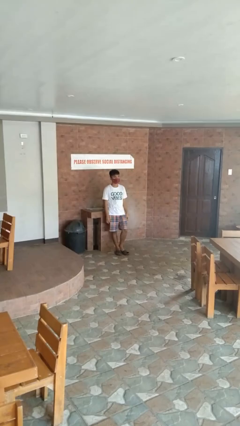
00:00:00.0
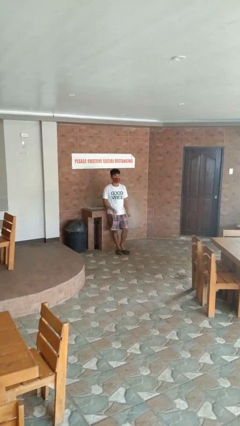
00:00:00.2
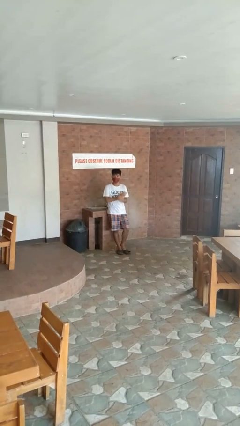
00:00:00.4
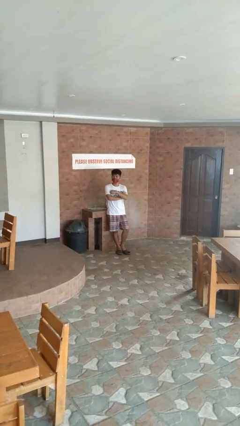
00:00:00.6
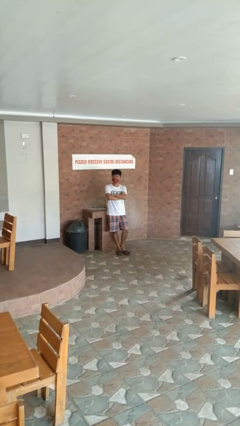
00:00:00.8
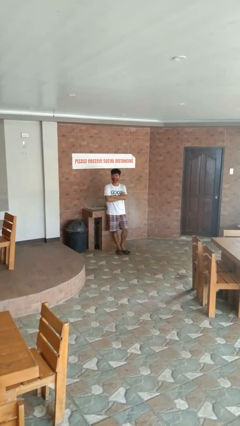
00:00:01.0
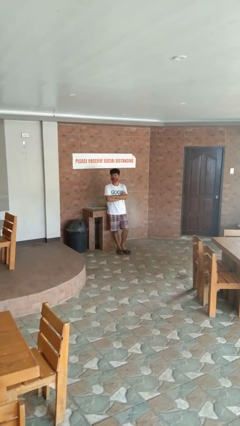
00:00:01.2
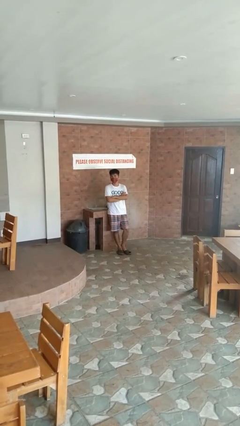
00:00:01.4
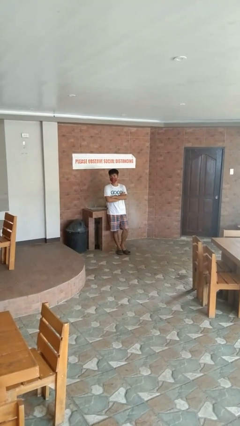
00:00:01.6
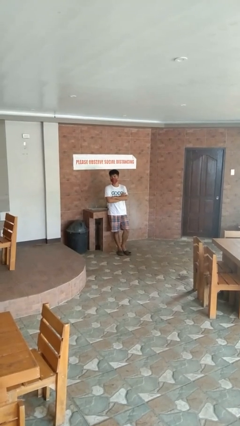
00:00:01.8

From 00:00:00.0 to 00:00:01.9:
person crosses arms

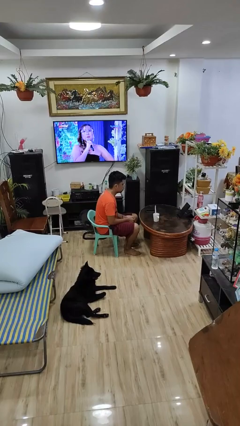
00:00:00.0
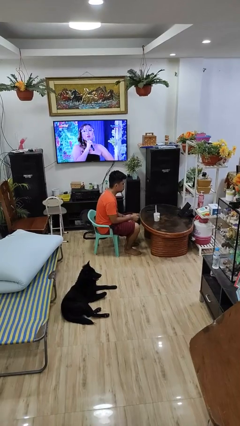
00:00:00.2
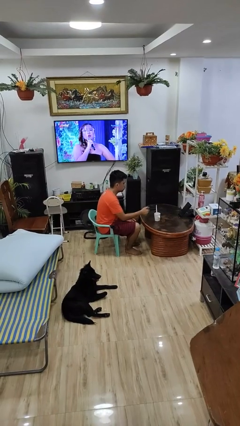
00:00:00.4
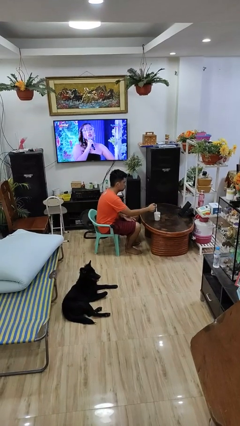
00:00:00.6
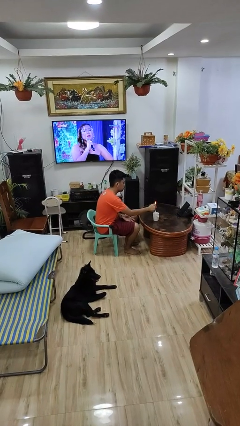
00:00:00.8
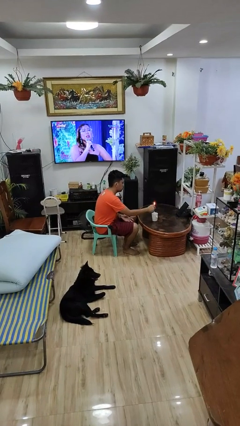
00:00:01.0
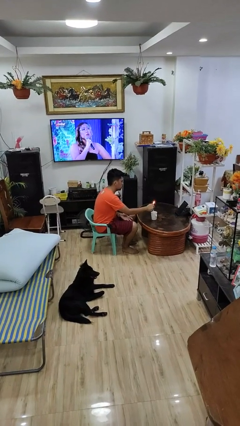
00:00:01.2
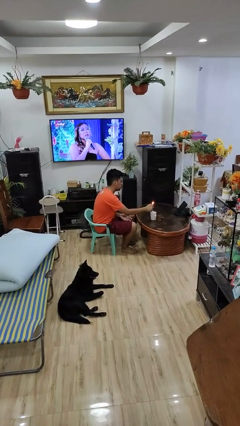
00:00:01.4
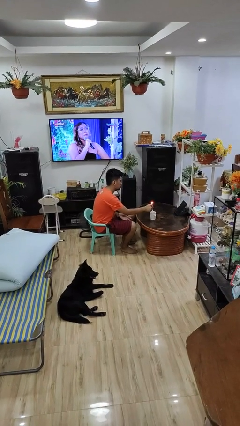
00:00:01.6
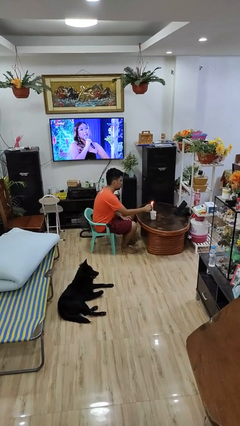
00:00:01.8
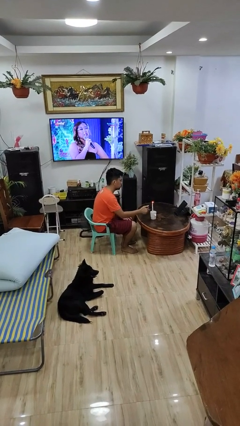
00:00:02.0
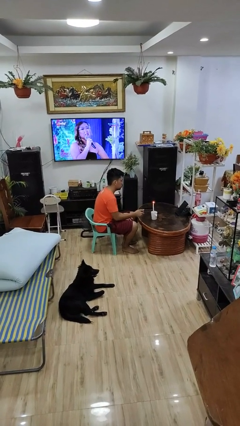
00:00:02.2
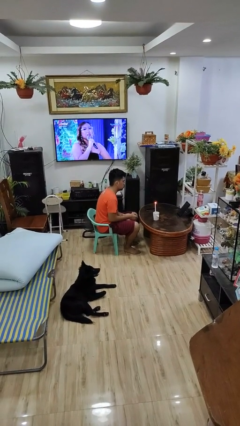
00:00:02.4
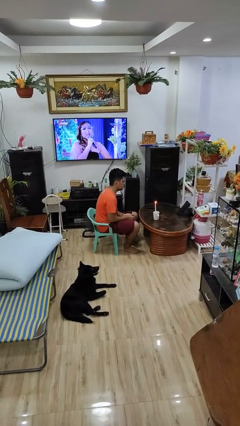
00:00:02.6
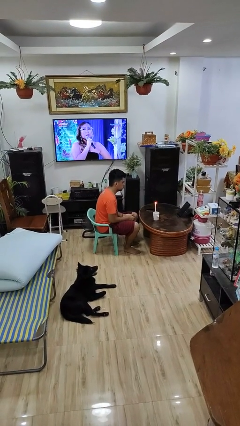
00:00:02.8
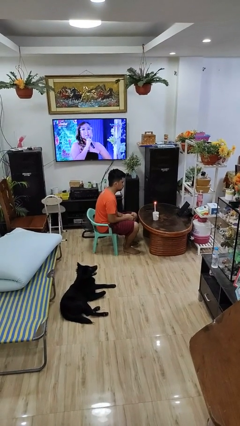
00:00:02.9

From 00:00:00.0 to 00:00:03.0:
person lights candle

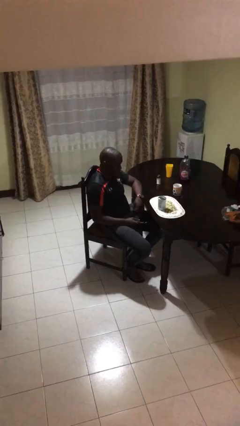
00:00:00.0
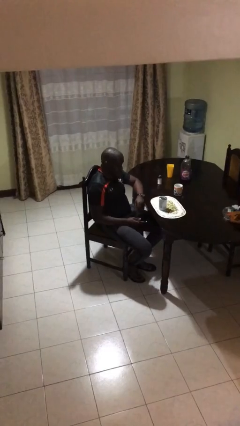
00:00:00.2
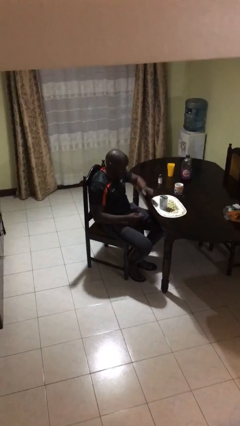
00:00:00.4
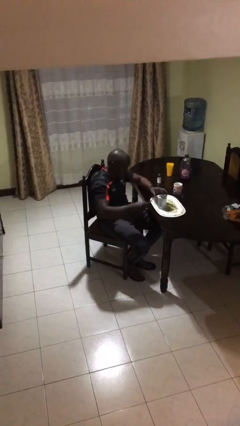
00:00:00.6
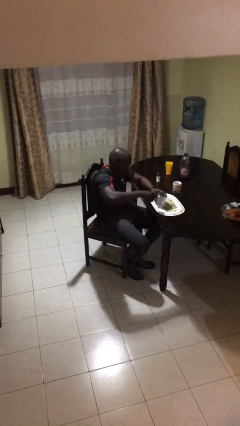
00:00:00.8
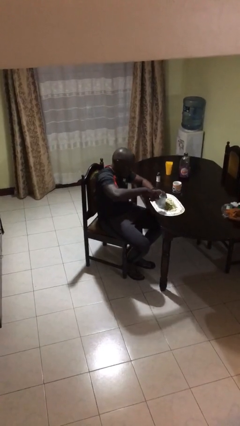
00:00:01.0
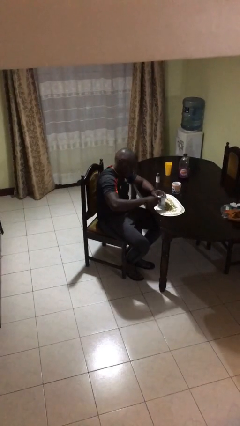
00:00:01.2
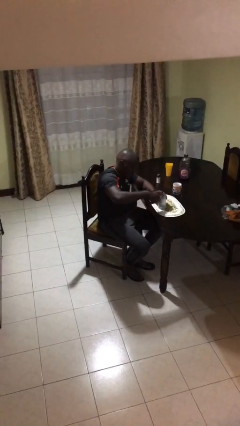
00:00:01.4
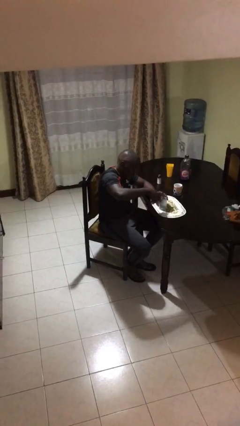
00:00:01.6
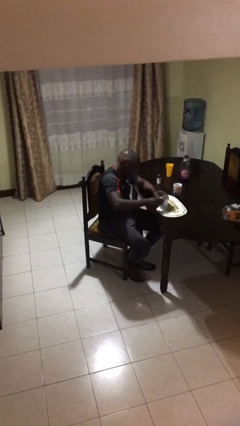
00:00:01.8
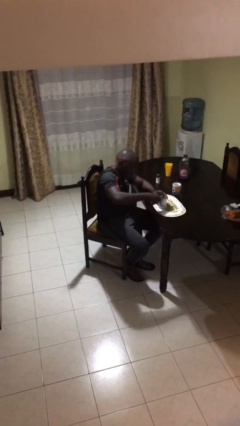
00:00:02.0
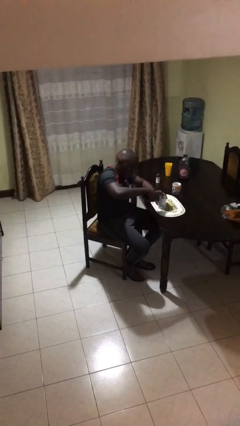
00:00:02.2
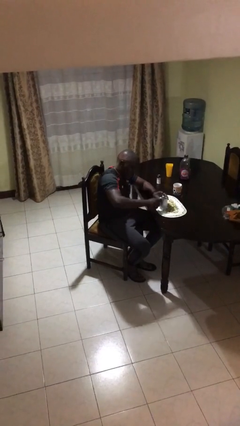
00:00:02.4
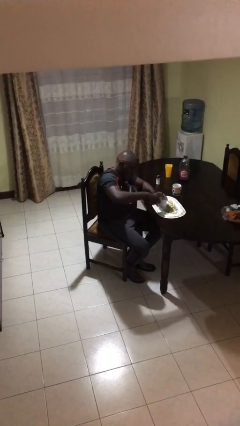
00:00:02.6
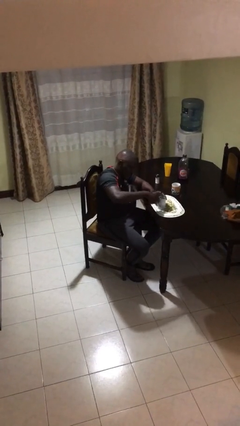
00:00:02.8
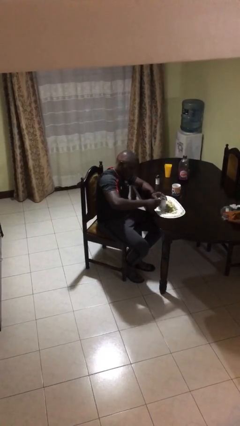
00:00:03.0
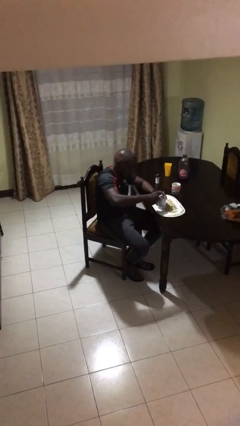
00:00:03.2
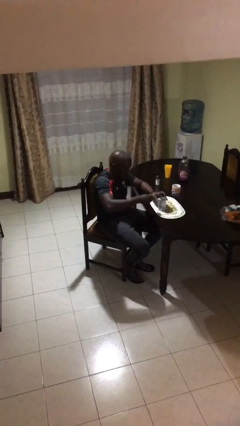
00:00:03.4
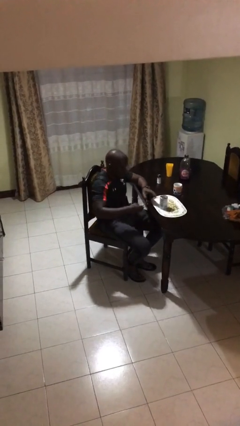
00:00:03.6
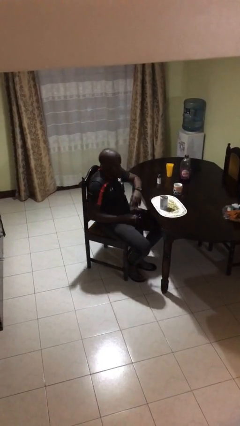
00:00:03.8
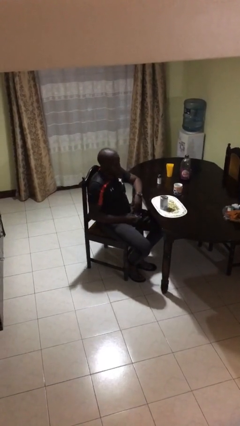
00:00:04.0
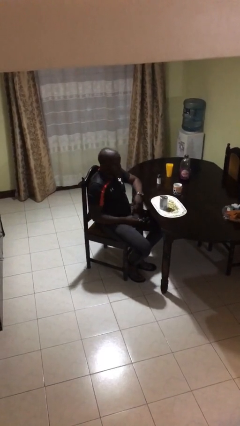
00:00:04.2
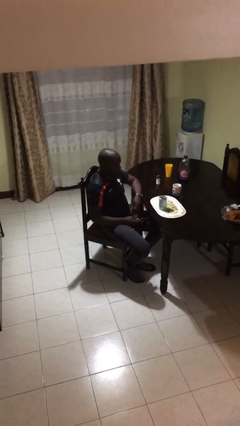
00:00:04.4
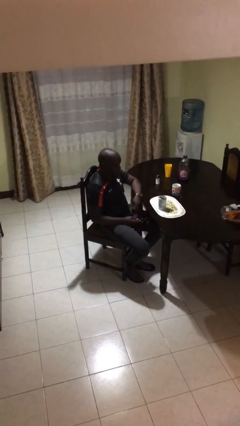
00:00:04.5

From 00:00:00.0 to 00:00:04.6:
person opens can with can opener

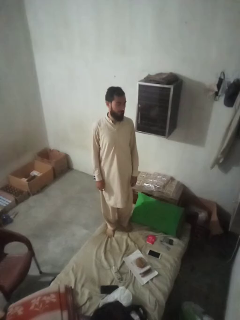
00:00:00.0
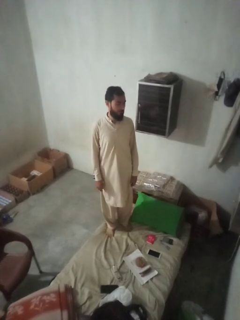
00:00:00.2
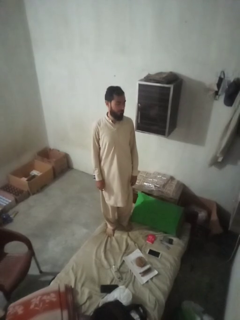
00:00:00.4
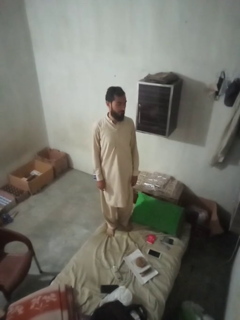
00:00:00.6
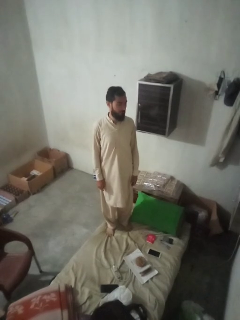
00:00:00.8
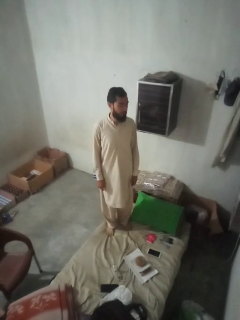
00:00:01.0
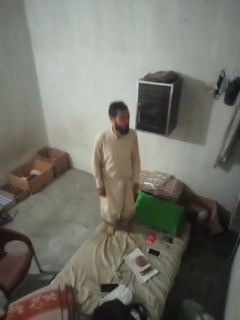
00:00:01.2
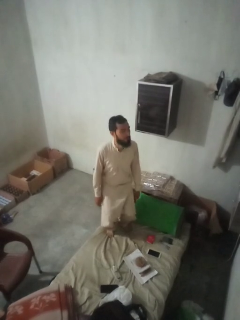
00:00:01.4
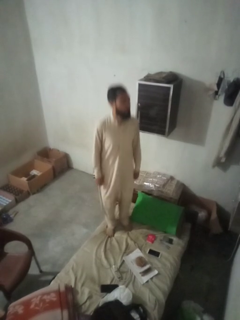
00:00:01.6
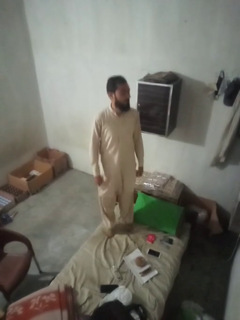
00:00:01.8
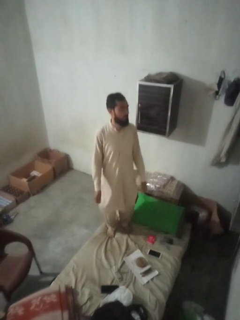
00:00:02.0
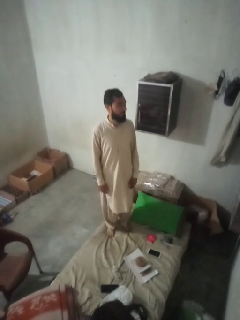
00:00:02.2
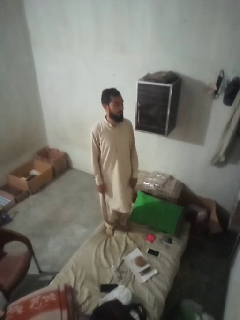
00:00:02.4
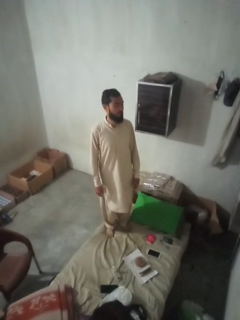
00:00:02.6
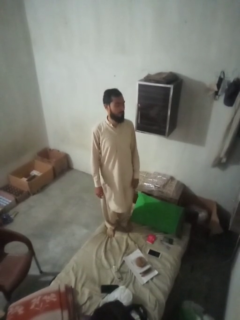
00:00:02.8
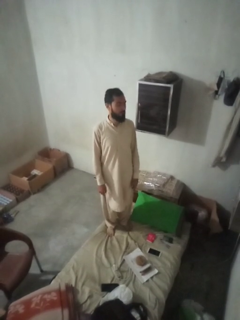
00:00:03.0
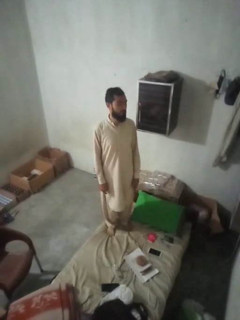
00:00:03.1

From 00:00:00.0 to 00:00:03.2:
person jumps on bed

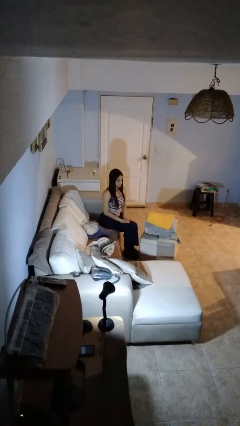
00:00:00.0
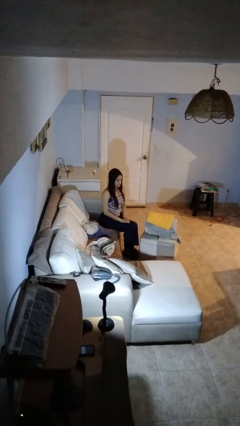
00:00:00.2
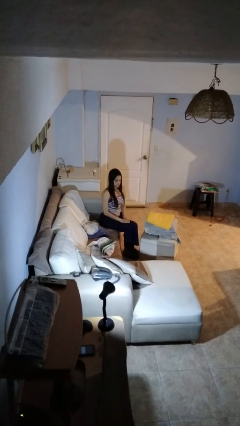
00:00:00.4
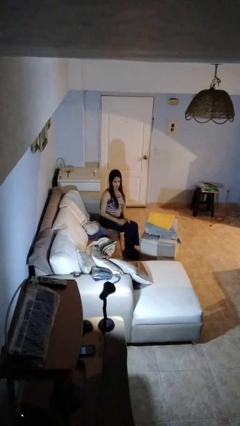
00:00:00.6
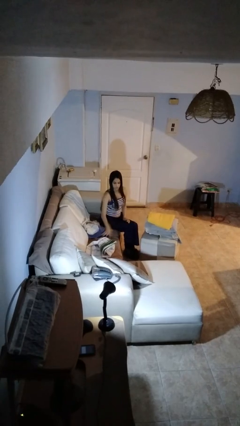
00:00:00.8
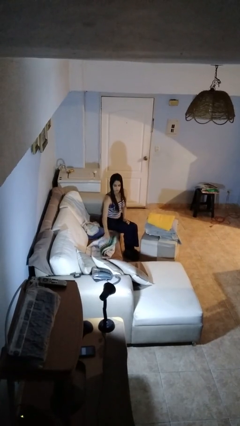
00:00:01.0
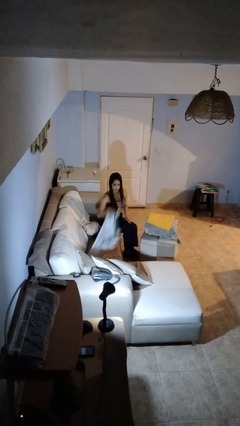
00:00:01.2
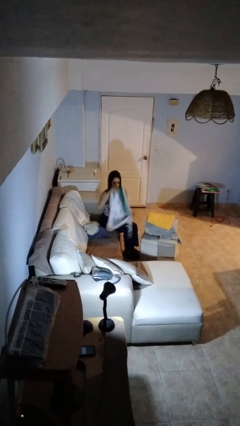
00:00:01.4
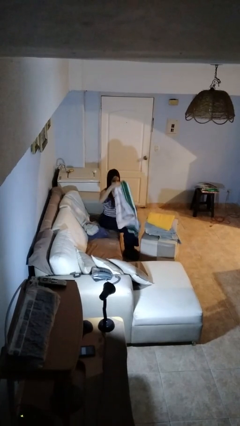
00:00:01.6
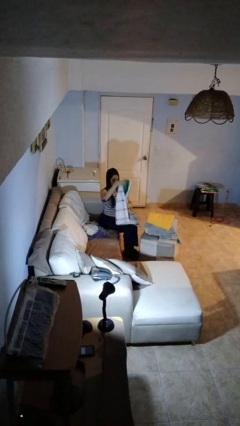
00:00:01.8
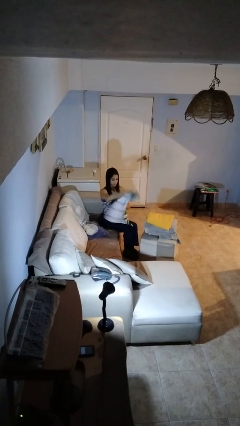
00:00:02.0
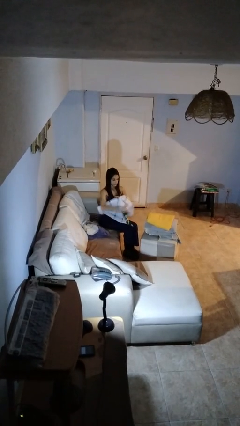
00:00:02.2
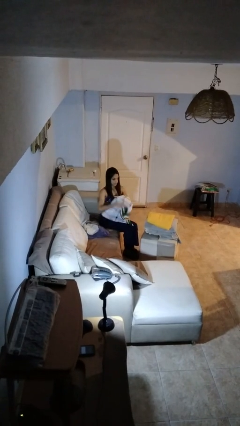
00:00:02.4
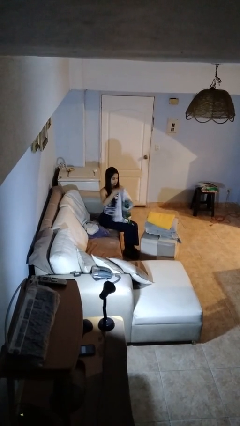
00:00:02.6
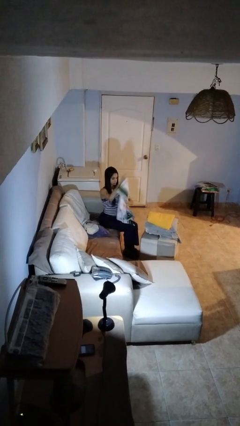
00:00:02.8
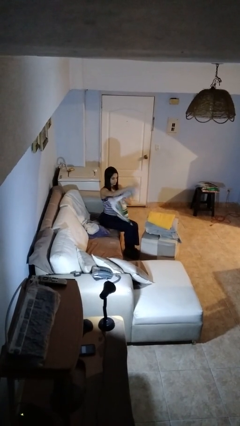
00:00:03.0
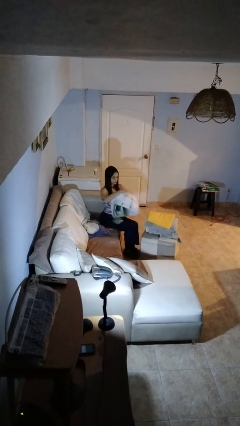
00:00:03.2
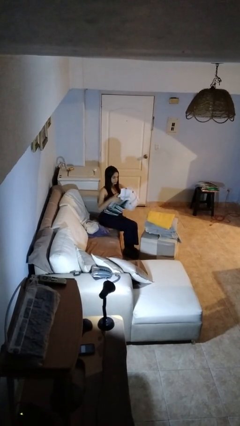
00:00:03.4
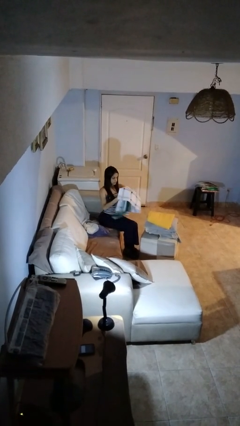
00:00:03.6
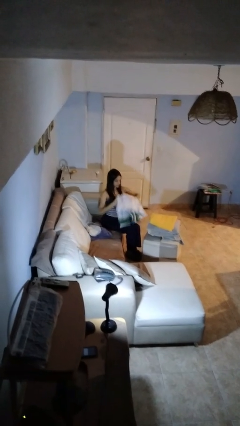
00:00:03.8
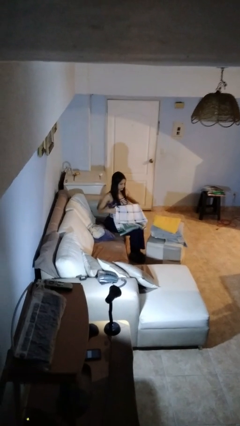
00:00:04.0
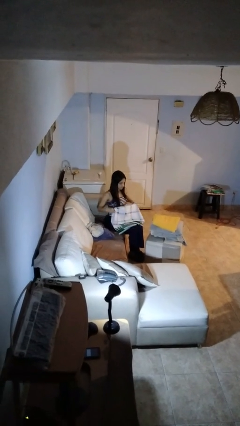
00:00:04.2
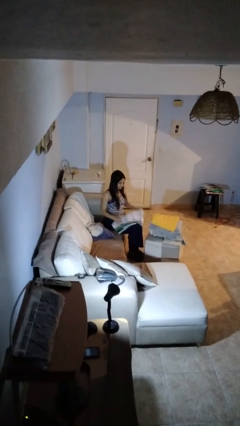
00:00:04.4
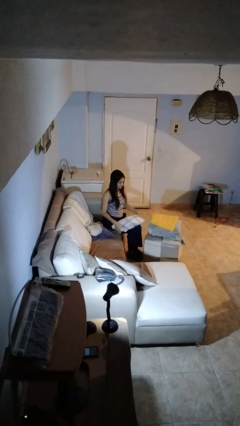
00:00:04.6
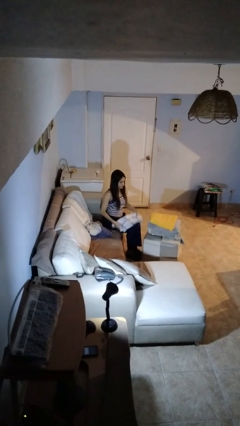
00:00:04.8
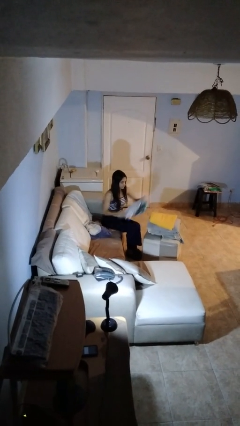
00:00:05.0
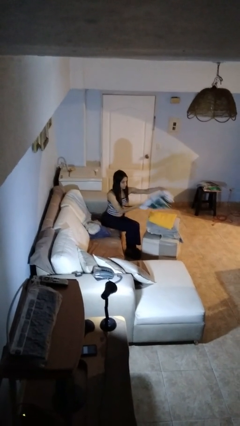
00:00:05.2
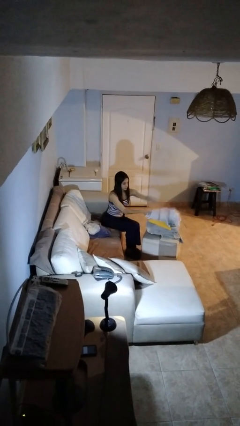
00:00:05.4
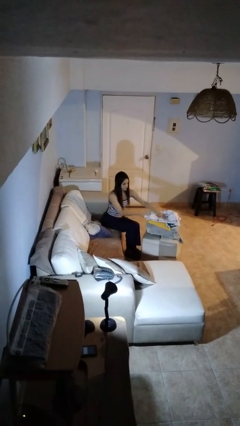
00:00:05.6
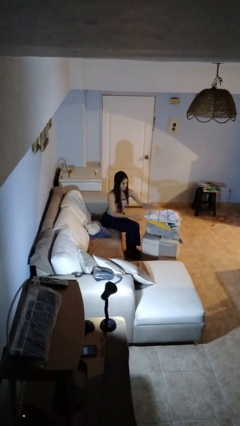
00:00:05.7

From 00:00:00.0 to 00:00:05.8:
person folds towel
